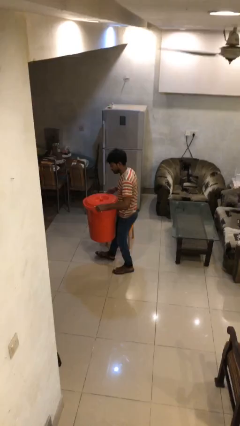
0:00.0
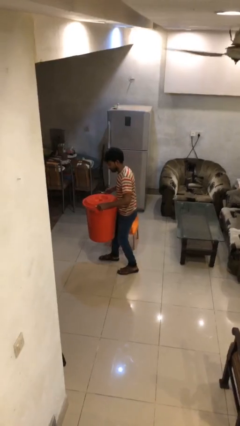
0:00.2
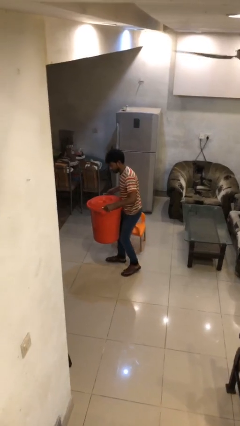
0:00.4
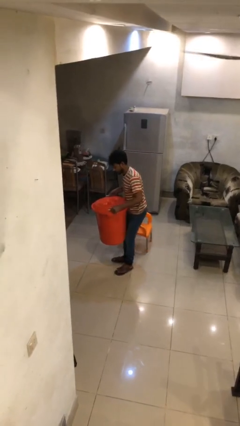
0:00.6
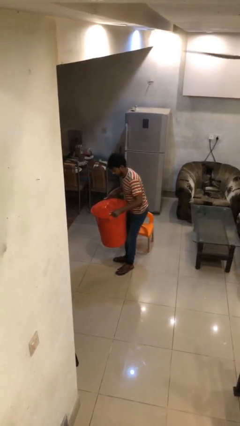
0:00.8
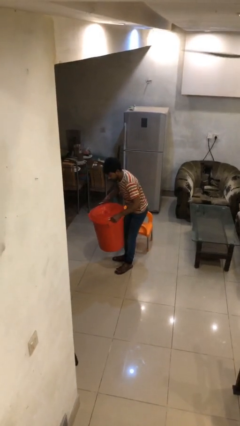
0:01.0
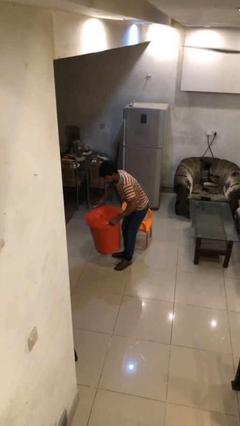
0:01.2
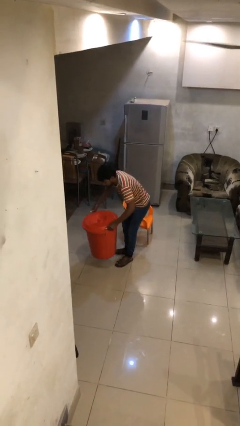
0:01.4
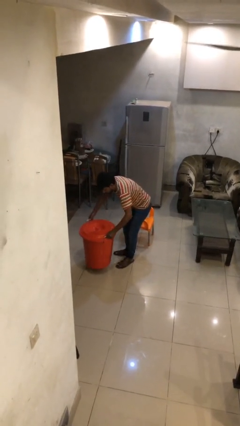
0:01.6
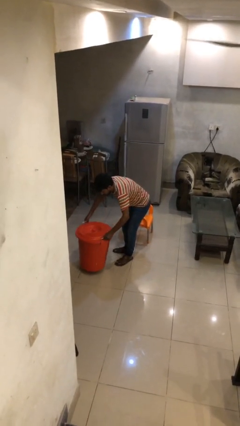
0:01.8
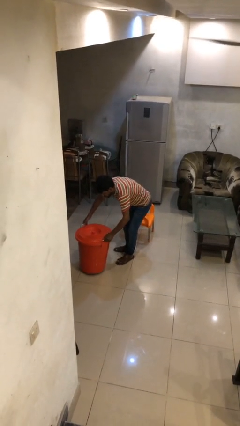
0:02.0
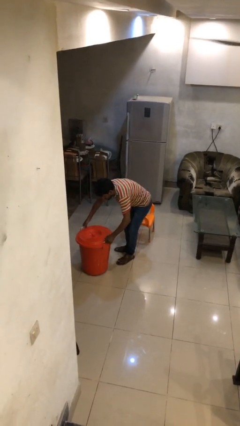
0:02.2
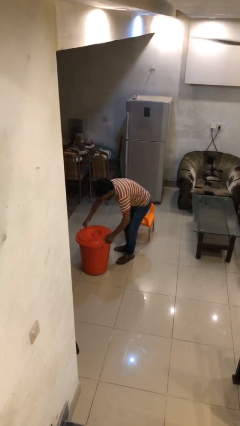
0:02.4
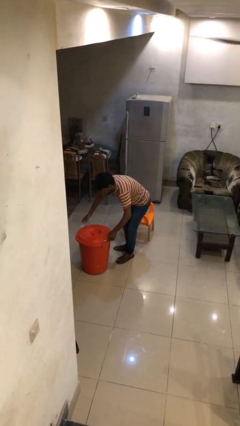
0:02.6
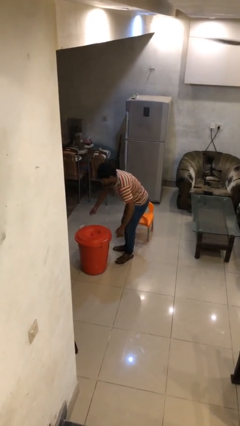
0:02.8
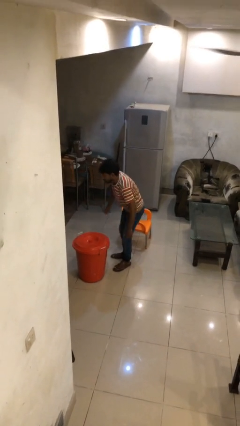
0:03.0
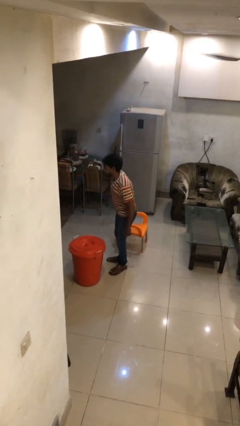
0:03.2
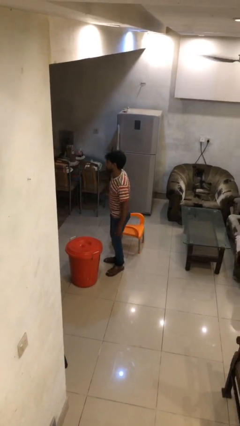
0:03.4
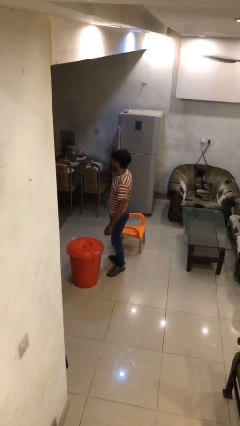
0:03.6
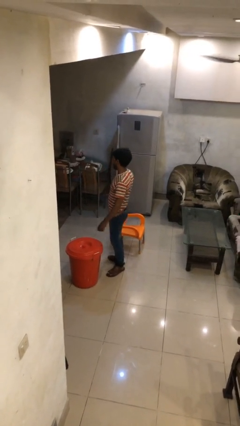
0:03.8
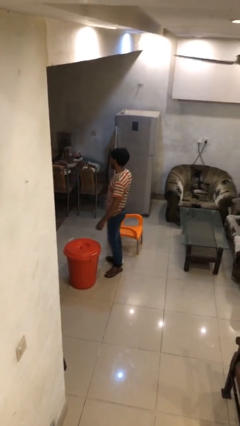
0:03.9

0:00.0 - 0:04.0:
person puts down object on floor

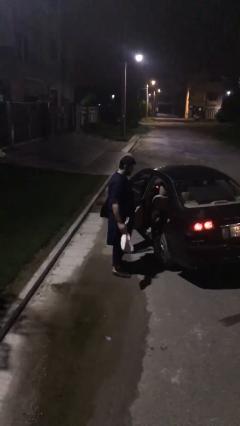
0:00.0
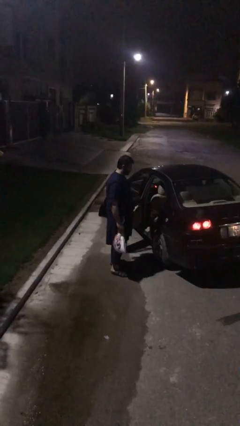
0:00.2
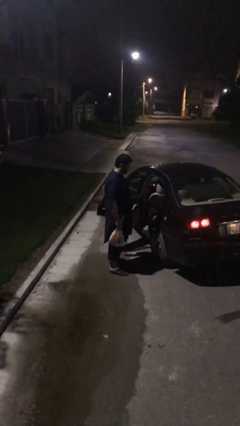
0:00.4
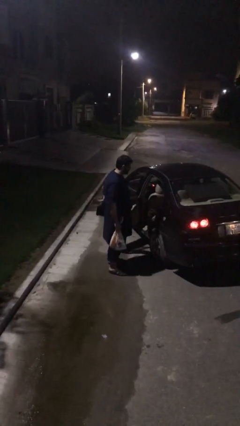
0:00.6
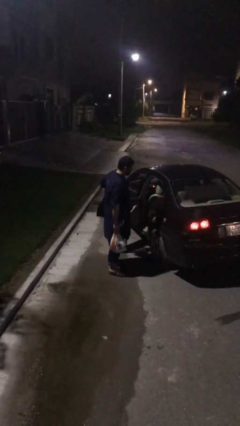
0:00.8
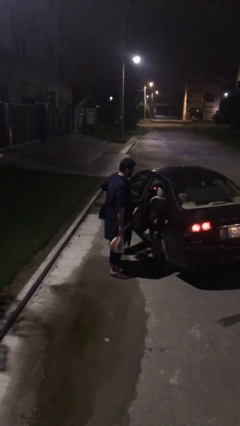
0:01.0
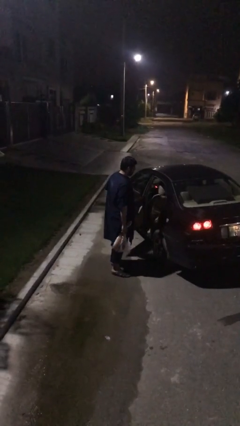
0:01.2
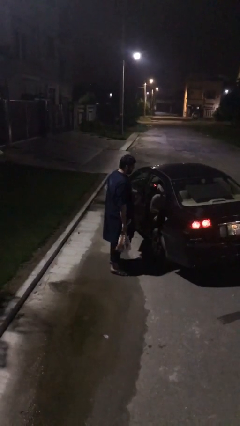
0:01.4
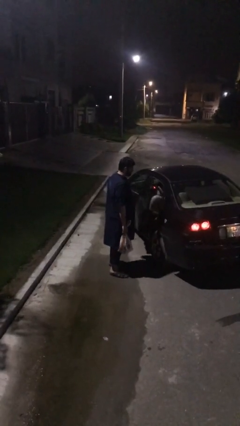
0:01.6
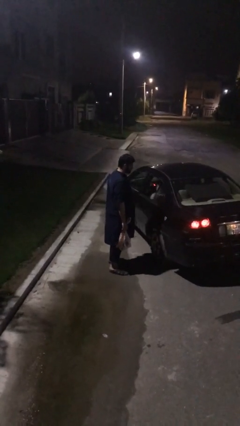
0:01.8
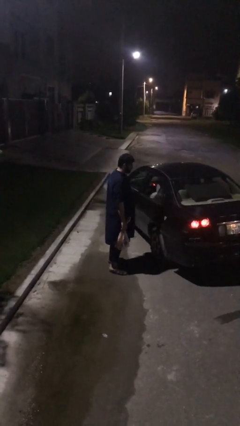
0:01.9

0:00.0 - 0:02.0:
person closes car door

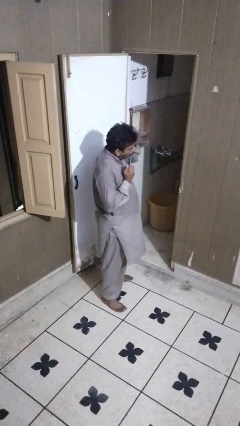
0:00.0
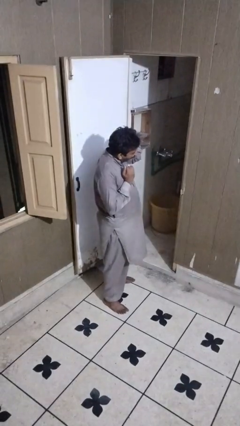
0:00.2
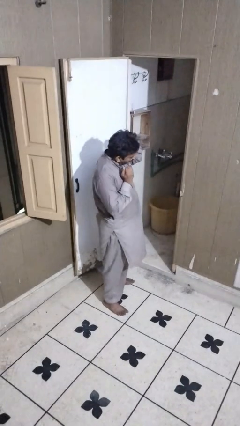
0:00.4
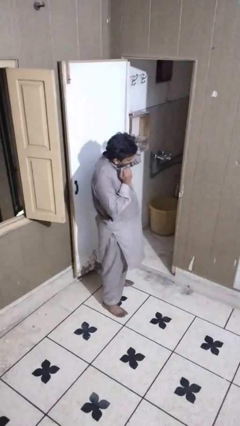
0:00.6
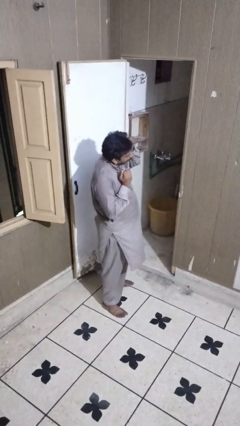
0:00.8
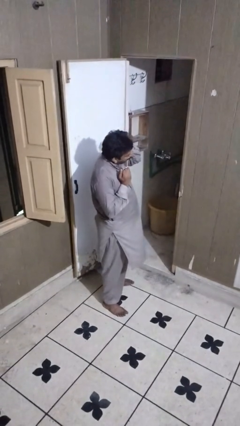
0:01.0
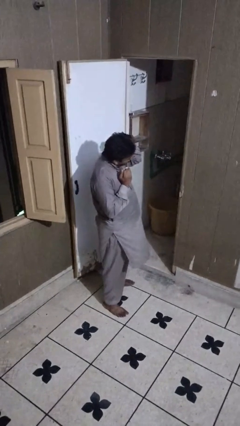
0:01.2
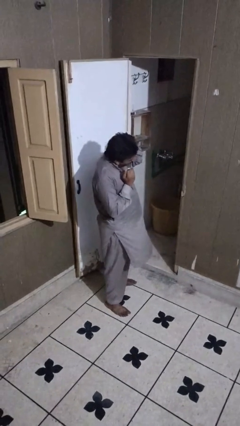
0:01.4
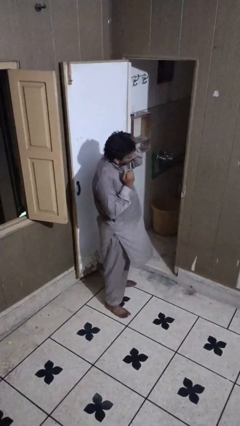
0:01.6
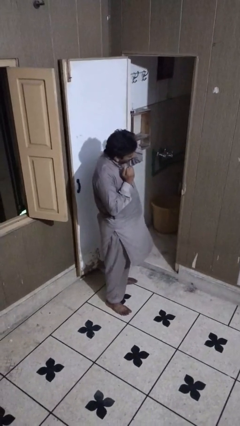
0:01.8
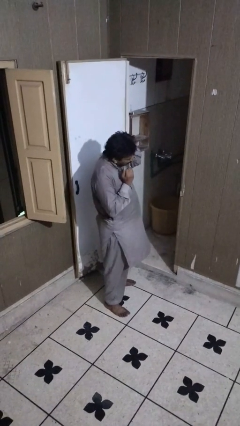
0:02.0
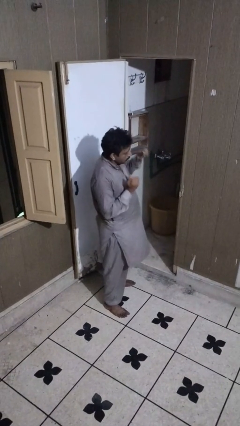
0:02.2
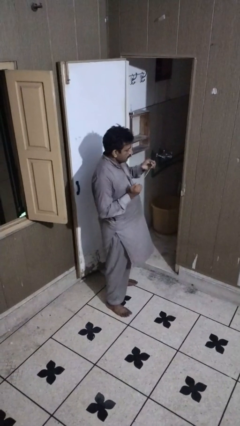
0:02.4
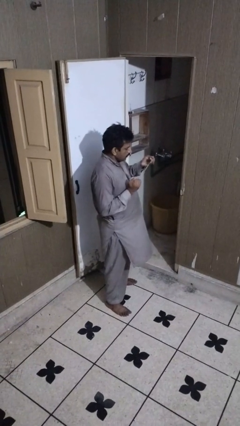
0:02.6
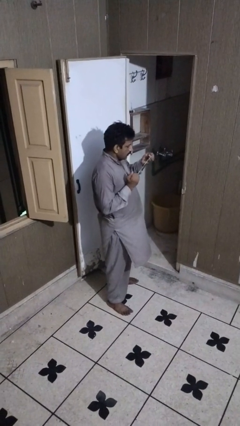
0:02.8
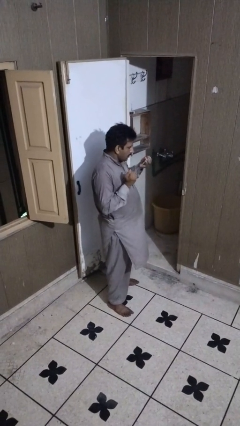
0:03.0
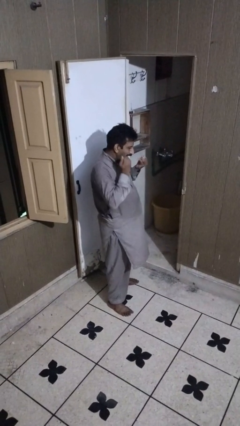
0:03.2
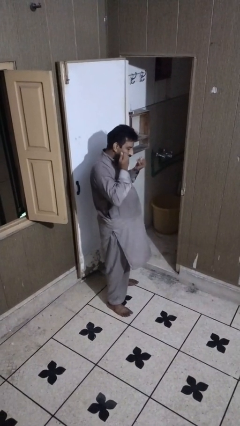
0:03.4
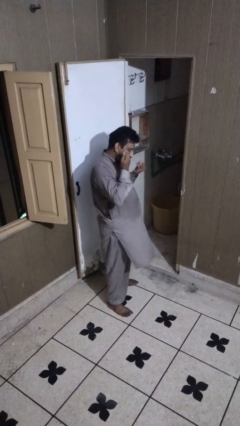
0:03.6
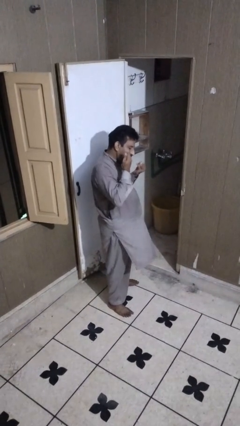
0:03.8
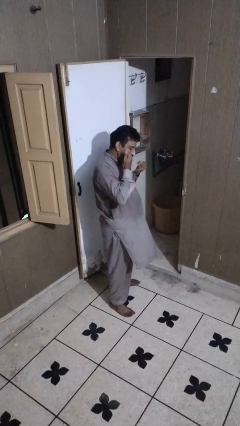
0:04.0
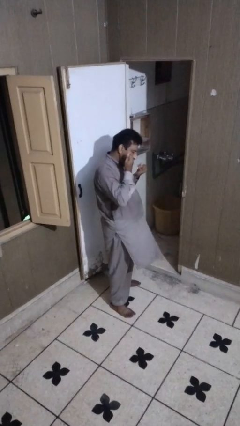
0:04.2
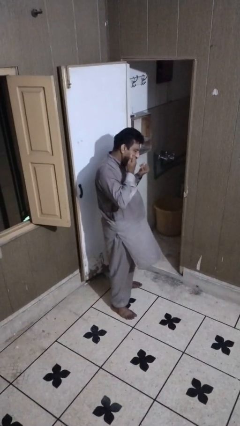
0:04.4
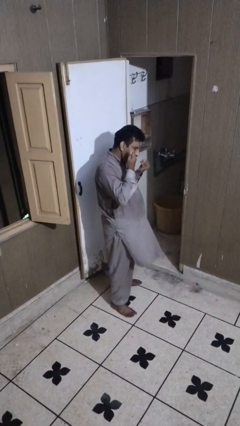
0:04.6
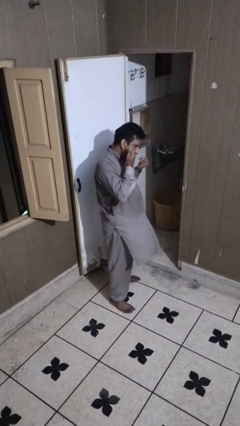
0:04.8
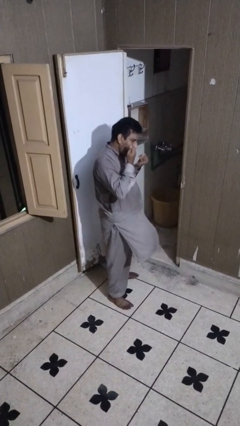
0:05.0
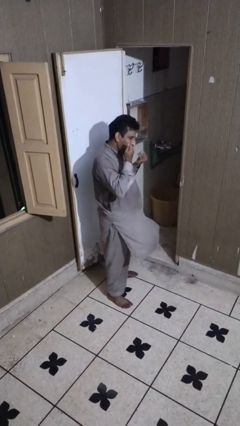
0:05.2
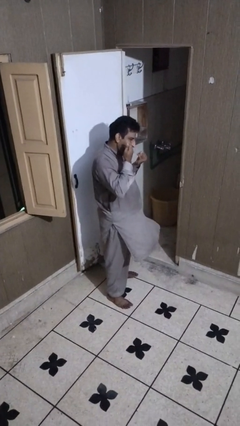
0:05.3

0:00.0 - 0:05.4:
person flosses

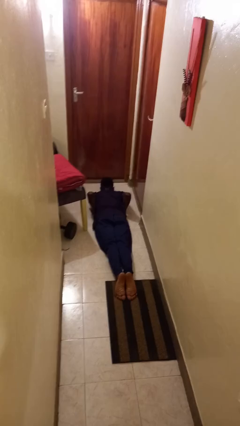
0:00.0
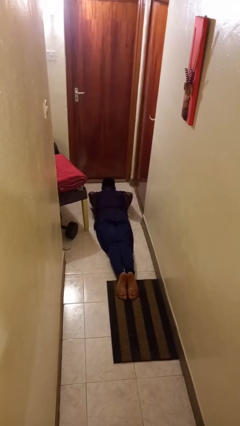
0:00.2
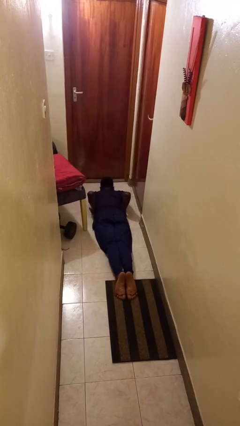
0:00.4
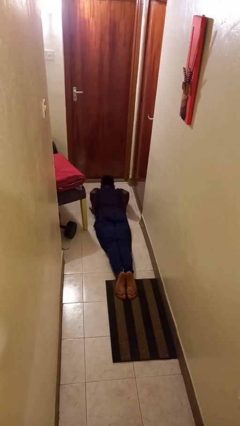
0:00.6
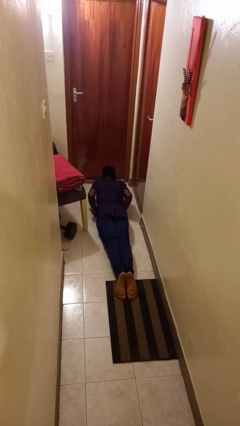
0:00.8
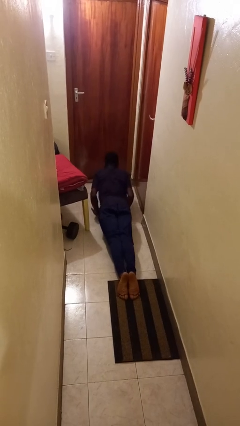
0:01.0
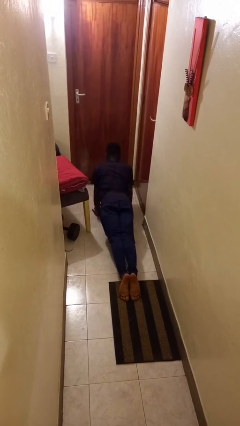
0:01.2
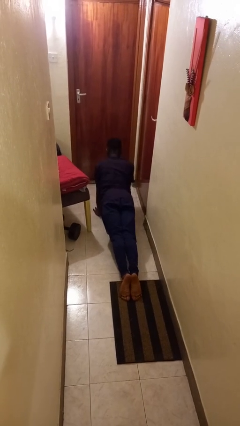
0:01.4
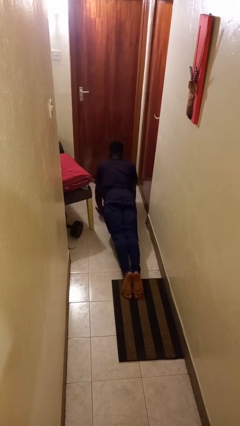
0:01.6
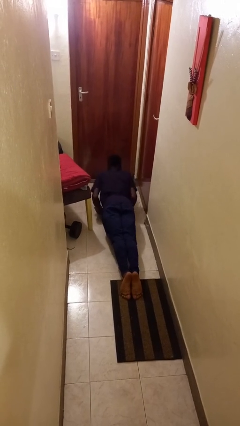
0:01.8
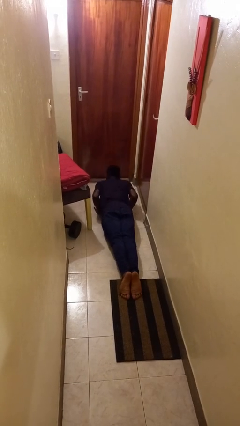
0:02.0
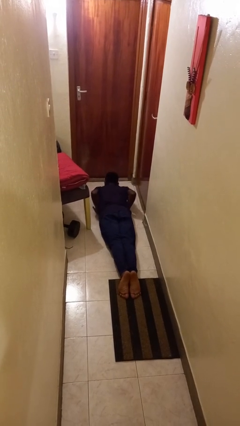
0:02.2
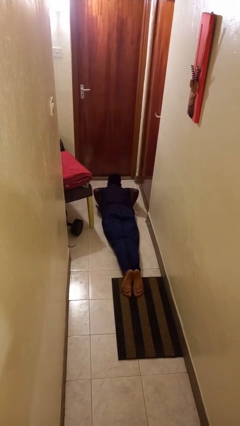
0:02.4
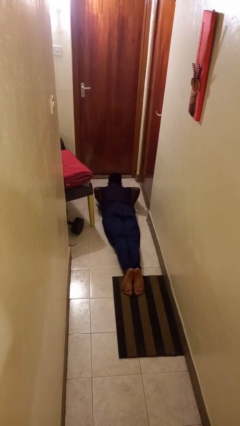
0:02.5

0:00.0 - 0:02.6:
person exercises with pushup

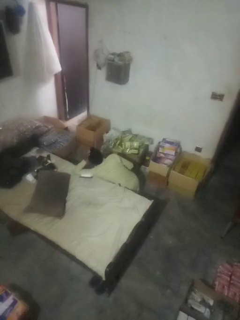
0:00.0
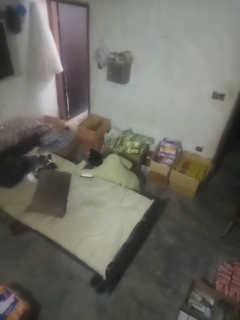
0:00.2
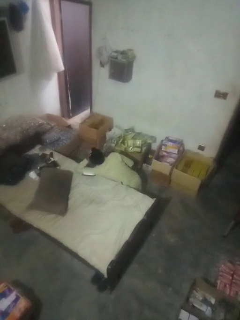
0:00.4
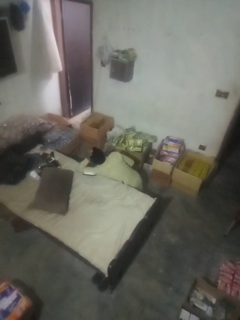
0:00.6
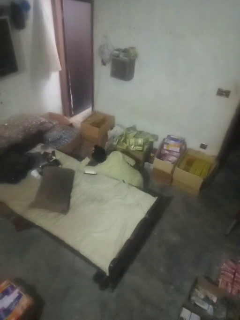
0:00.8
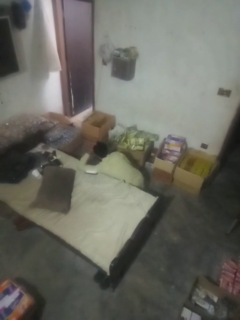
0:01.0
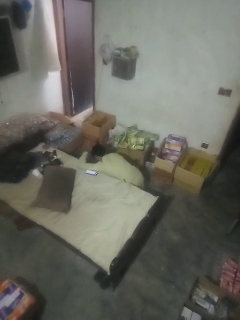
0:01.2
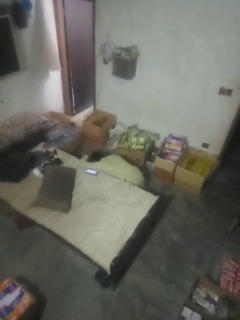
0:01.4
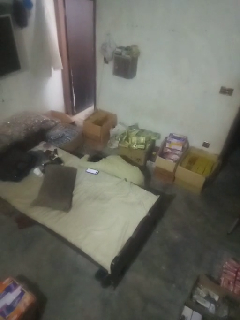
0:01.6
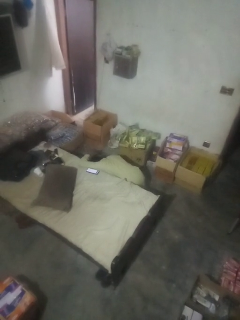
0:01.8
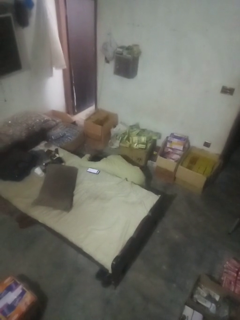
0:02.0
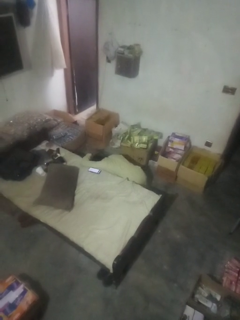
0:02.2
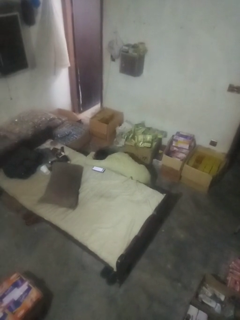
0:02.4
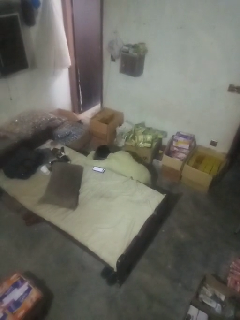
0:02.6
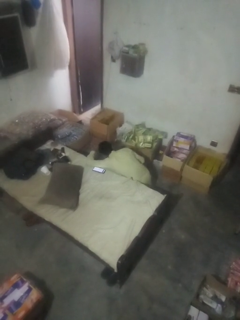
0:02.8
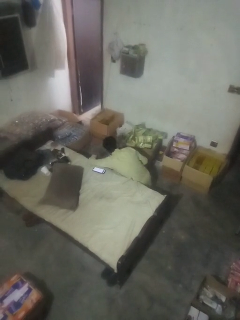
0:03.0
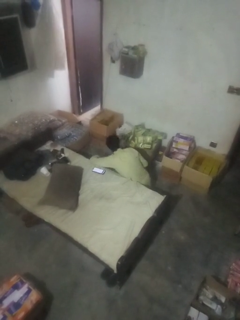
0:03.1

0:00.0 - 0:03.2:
person searches under bed

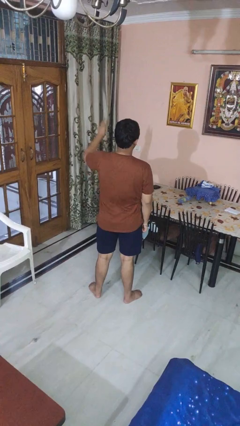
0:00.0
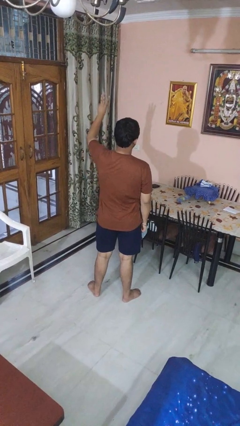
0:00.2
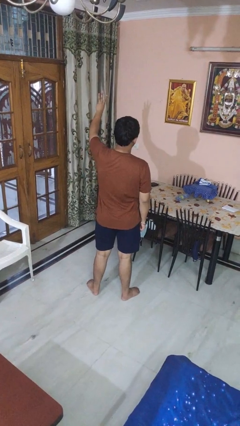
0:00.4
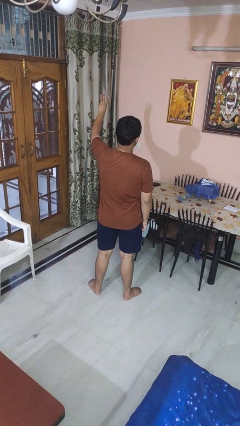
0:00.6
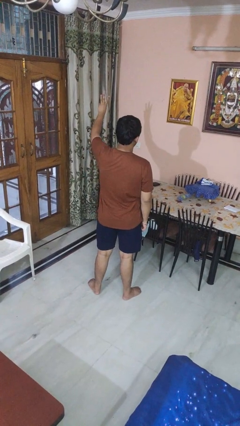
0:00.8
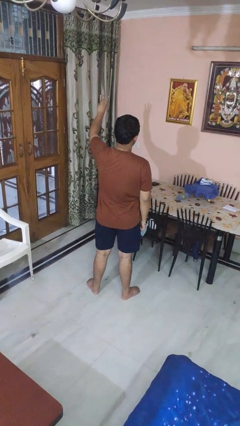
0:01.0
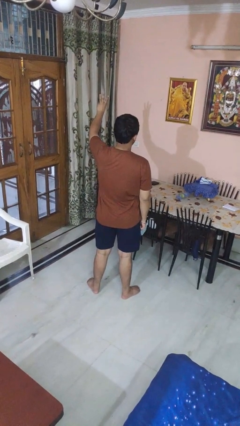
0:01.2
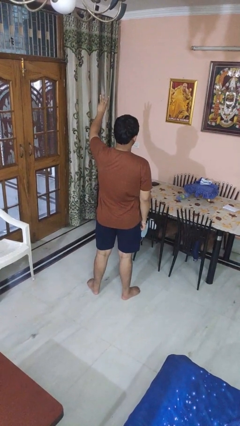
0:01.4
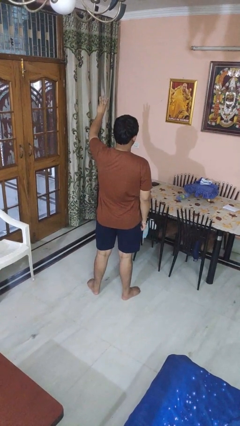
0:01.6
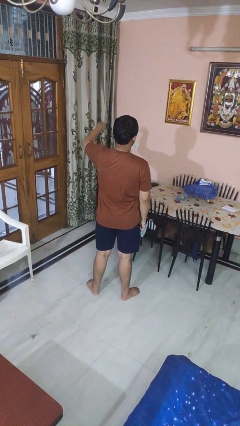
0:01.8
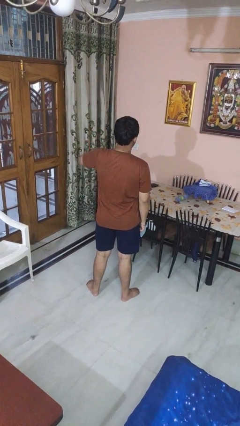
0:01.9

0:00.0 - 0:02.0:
person gestures number three
